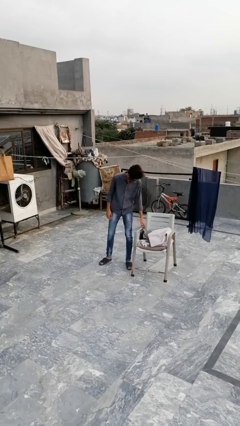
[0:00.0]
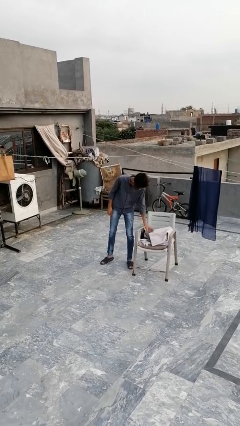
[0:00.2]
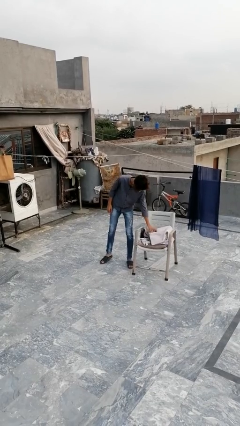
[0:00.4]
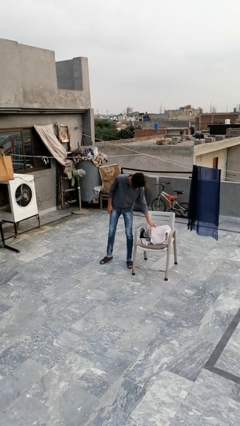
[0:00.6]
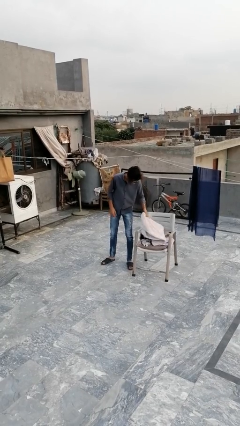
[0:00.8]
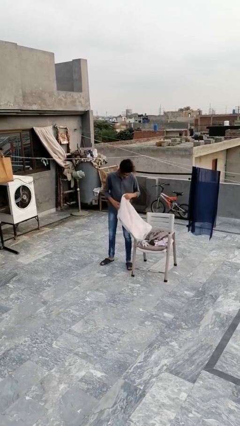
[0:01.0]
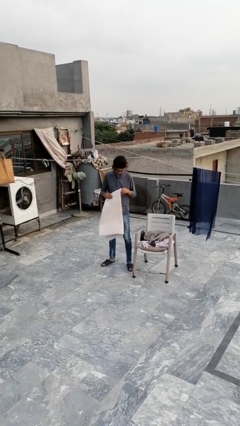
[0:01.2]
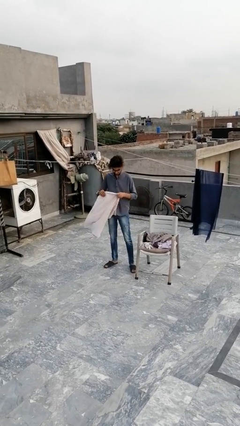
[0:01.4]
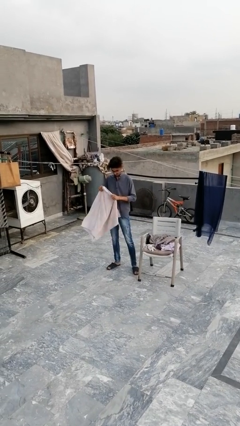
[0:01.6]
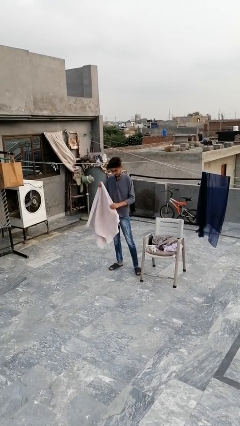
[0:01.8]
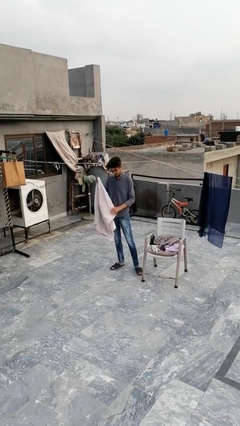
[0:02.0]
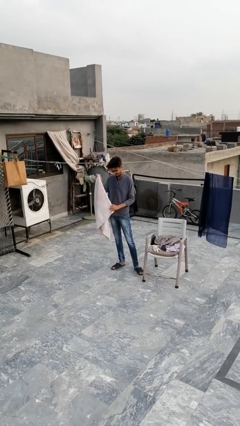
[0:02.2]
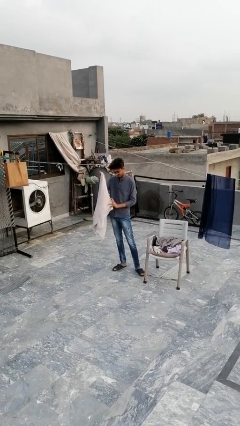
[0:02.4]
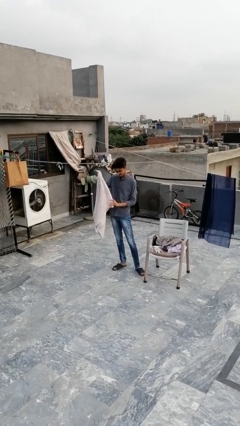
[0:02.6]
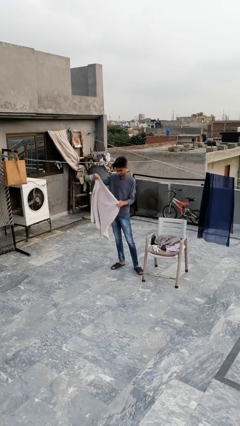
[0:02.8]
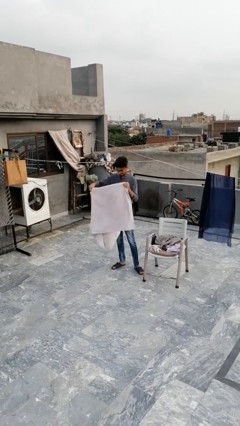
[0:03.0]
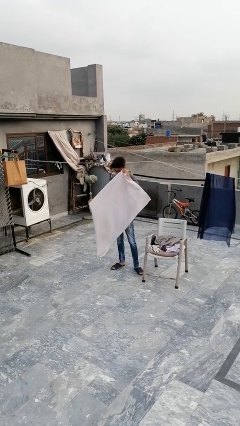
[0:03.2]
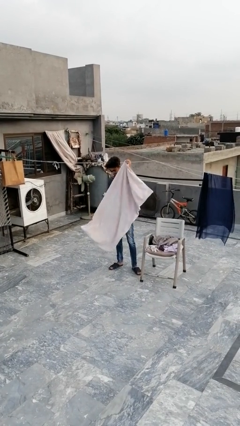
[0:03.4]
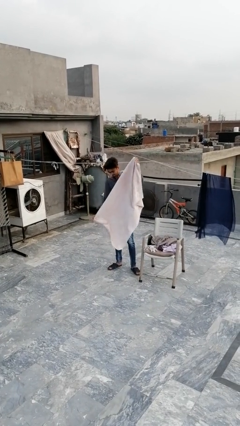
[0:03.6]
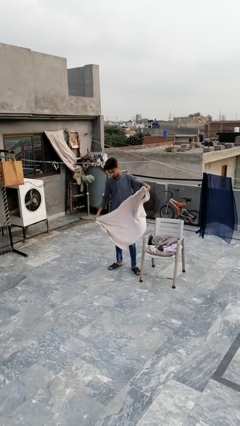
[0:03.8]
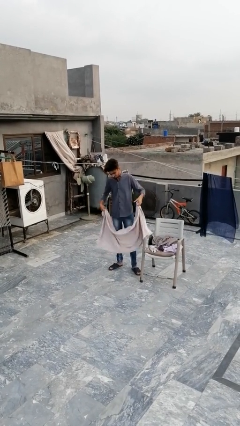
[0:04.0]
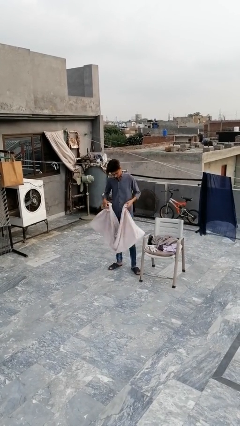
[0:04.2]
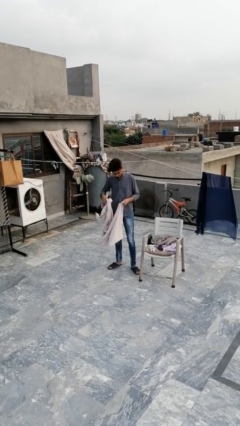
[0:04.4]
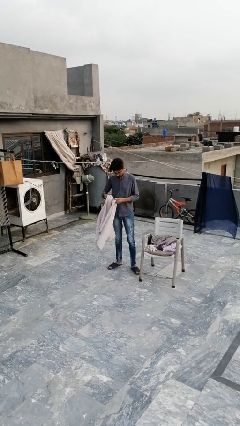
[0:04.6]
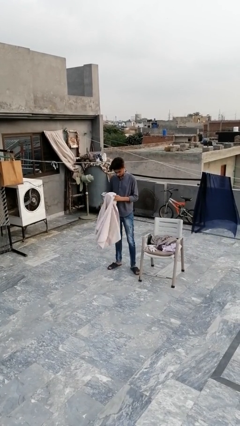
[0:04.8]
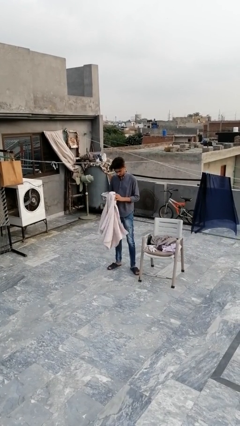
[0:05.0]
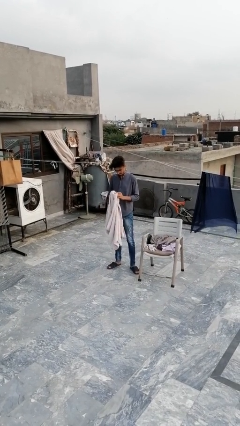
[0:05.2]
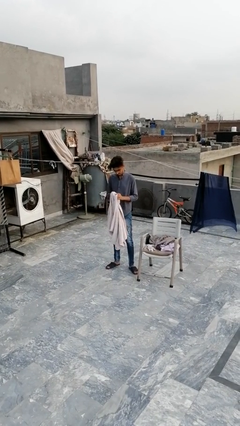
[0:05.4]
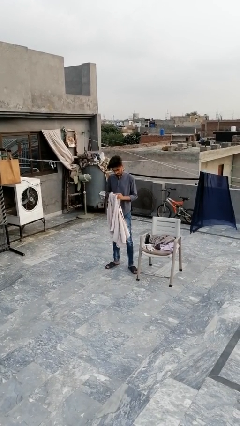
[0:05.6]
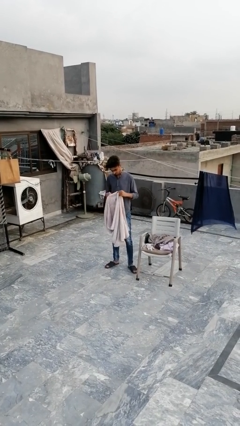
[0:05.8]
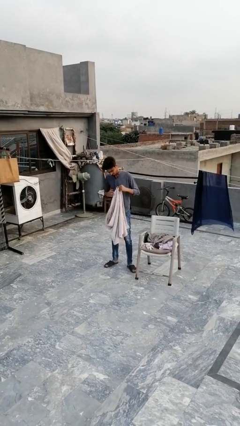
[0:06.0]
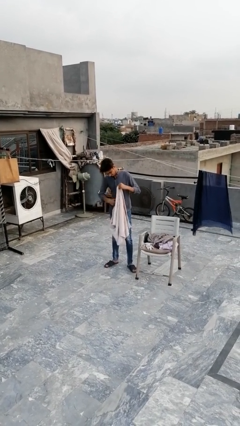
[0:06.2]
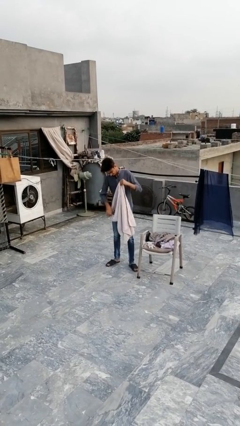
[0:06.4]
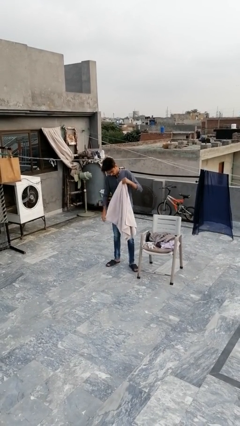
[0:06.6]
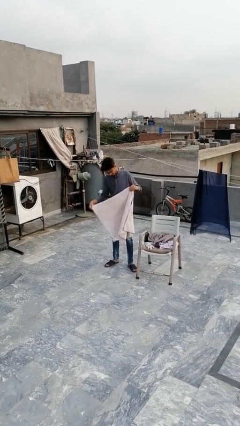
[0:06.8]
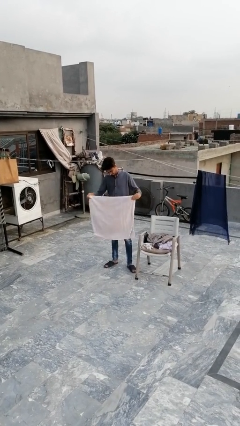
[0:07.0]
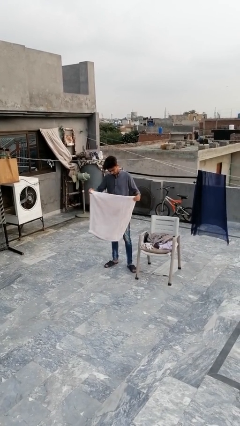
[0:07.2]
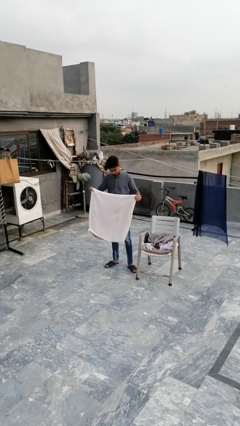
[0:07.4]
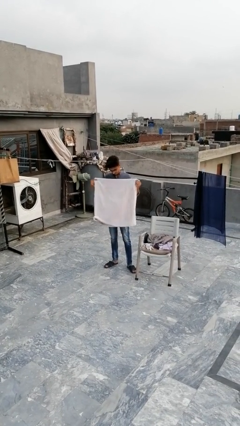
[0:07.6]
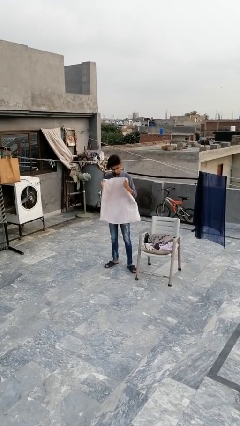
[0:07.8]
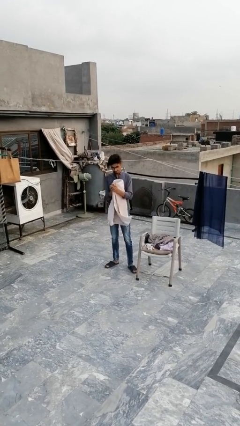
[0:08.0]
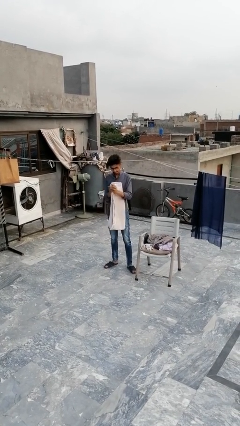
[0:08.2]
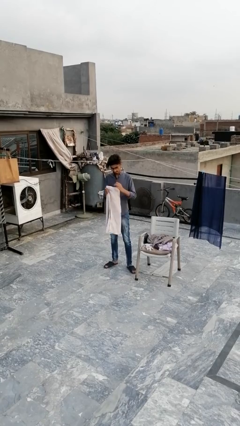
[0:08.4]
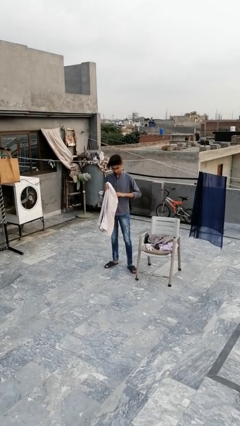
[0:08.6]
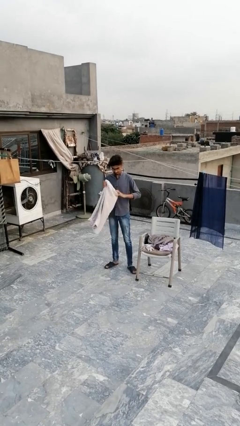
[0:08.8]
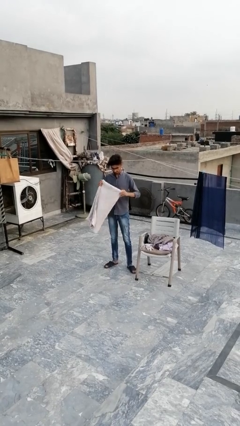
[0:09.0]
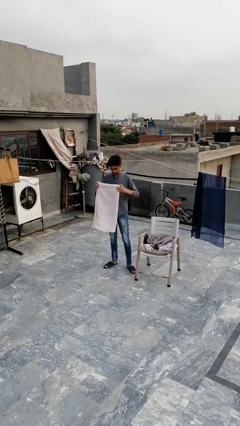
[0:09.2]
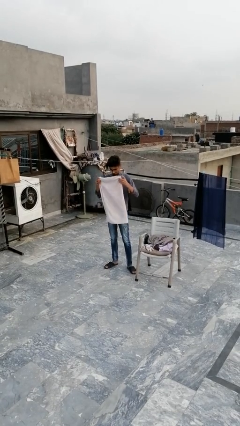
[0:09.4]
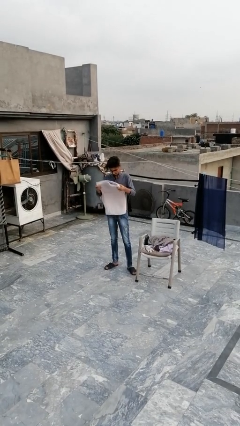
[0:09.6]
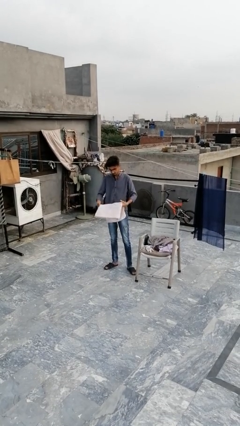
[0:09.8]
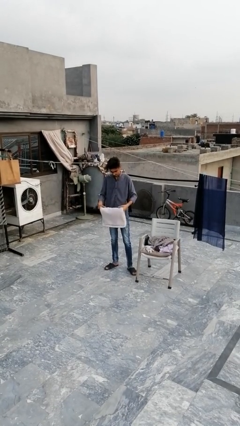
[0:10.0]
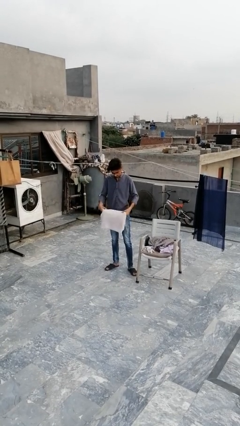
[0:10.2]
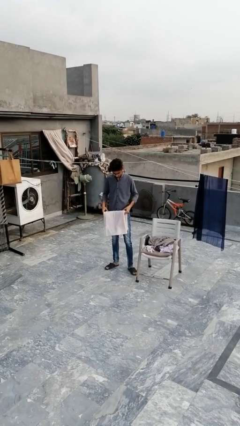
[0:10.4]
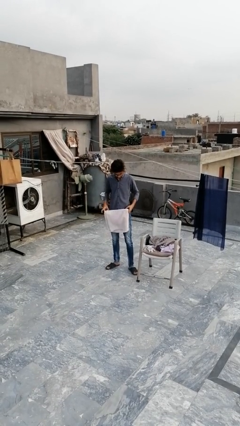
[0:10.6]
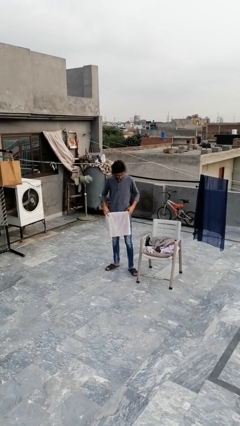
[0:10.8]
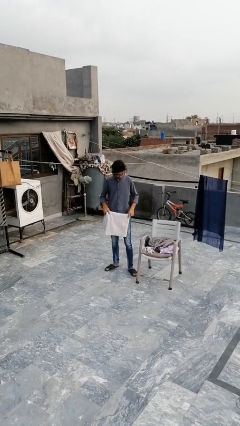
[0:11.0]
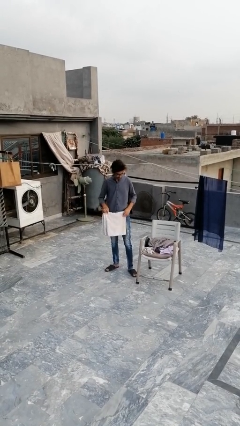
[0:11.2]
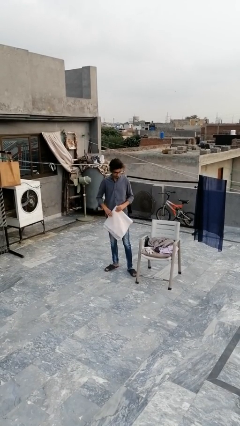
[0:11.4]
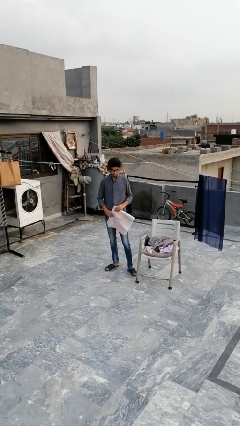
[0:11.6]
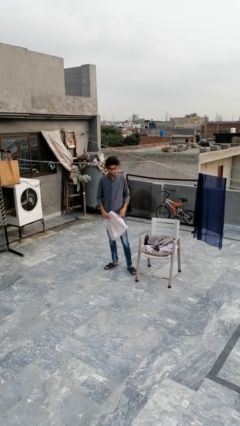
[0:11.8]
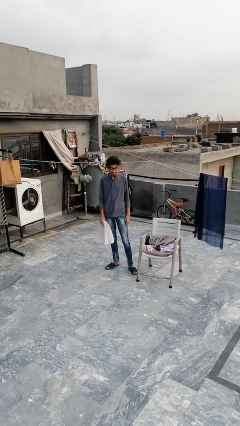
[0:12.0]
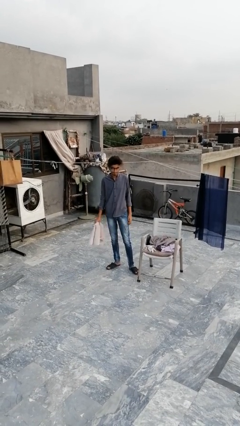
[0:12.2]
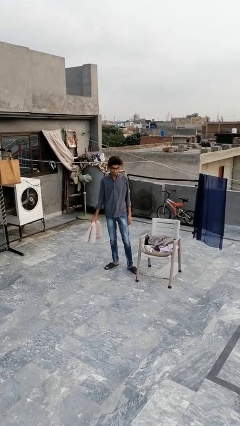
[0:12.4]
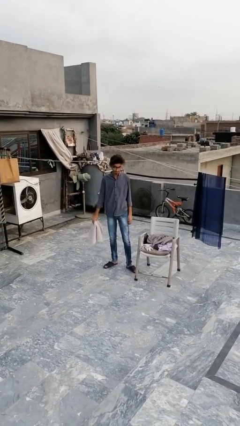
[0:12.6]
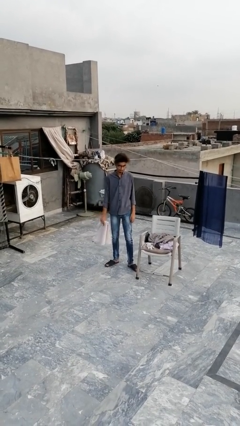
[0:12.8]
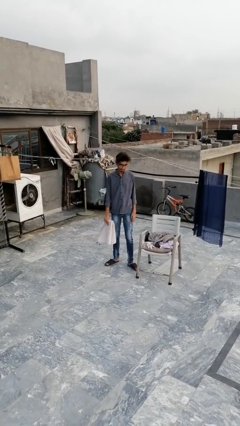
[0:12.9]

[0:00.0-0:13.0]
person folds towel

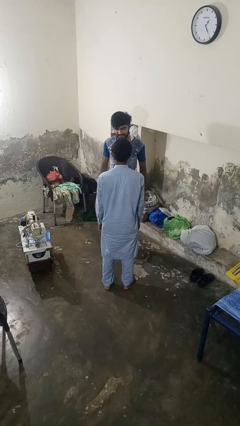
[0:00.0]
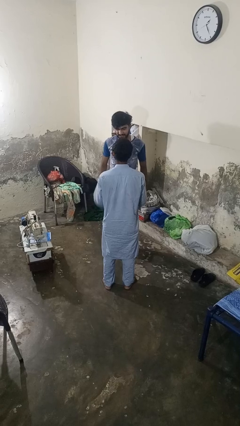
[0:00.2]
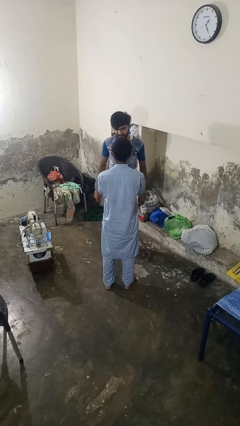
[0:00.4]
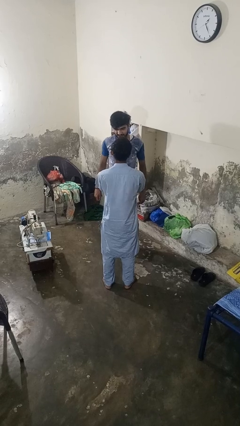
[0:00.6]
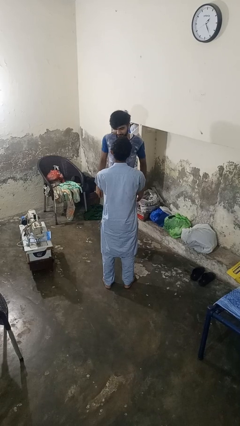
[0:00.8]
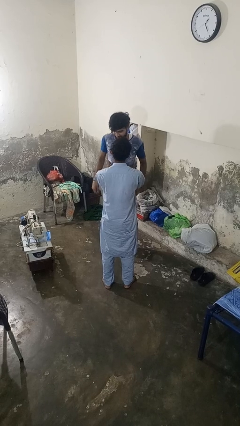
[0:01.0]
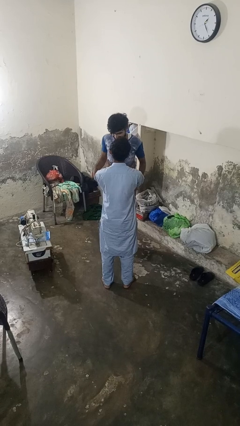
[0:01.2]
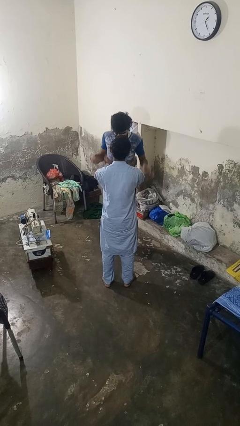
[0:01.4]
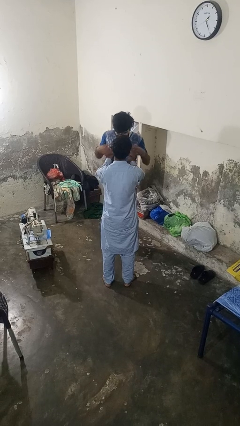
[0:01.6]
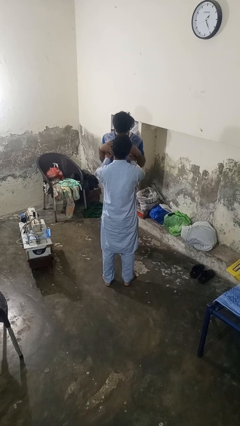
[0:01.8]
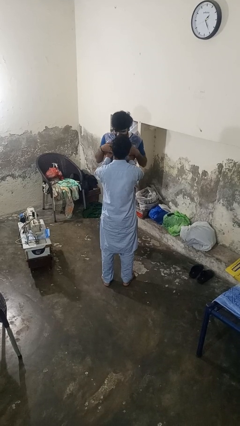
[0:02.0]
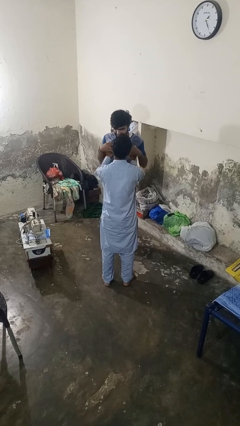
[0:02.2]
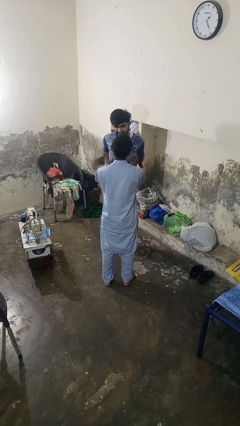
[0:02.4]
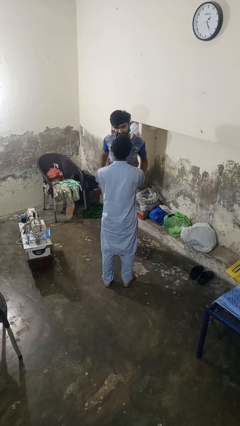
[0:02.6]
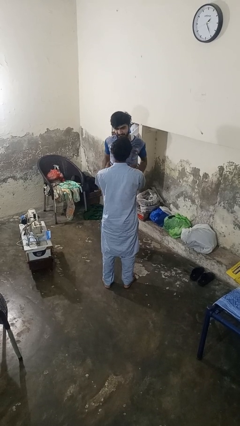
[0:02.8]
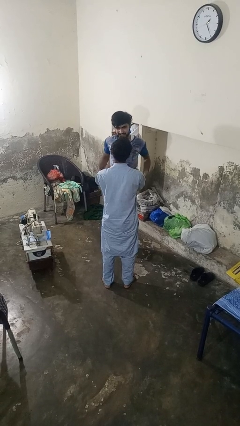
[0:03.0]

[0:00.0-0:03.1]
person tickles person

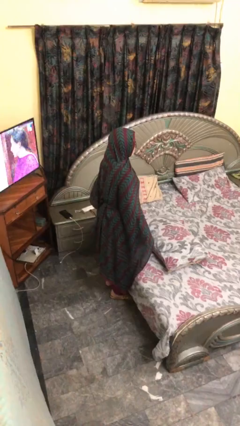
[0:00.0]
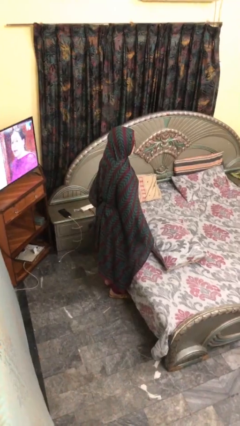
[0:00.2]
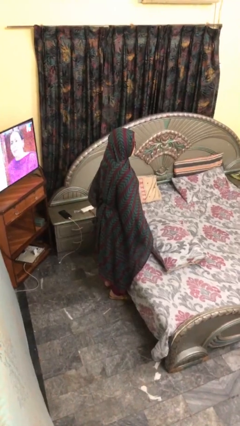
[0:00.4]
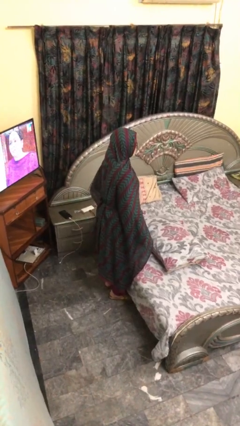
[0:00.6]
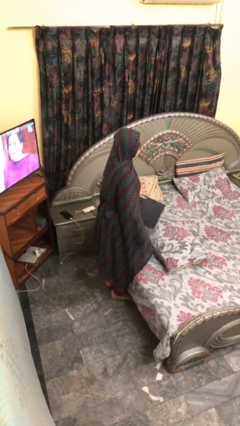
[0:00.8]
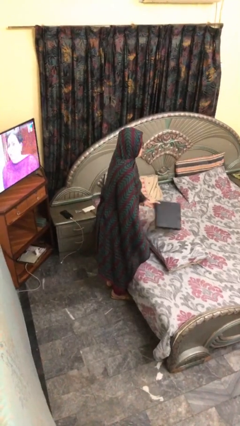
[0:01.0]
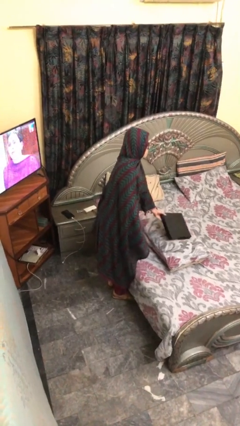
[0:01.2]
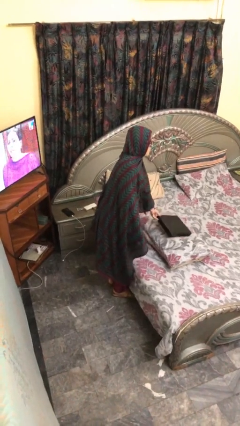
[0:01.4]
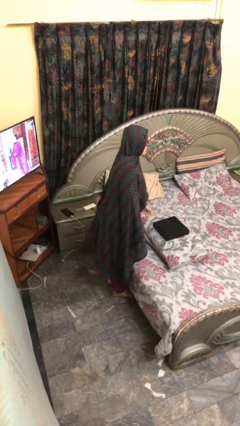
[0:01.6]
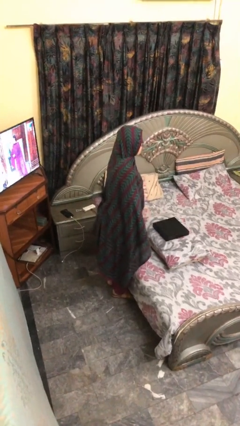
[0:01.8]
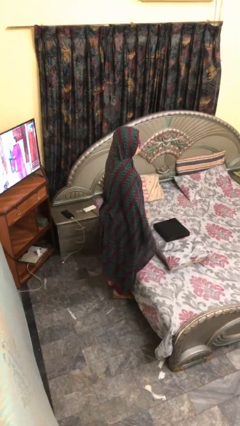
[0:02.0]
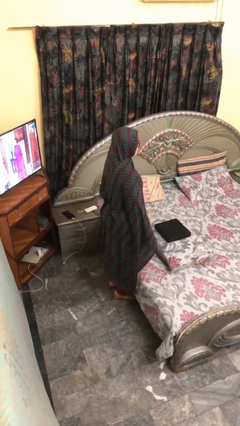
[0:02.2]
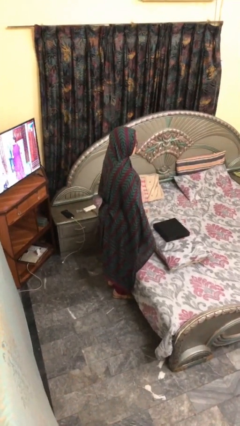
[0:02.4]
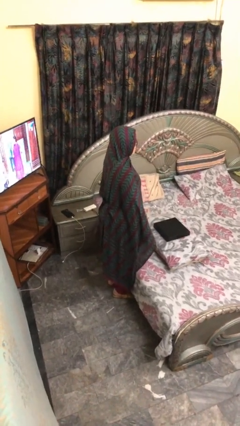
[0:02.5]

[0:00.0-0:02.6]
person puts down object on bed
